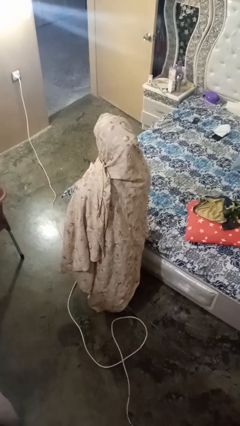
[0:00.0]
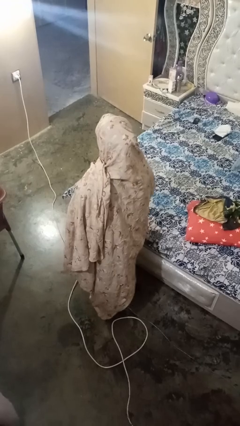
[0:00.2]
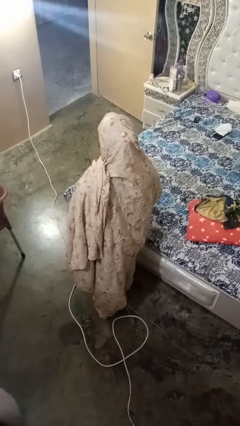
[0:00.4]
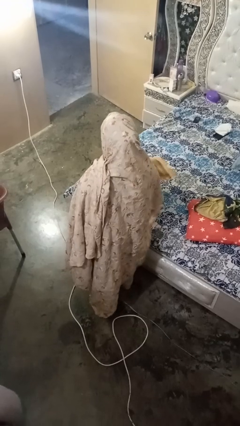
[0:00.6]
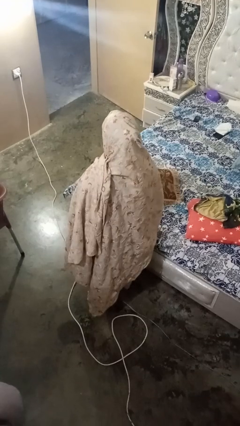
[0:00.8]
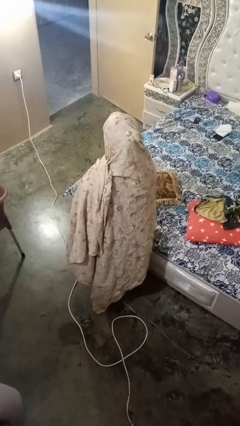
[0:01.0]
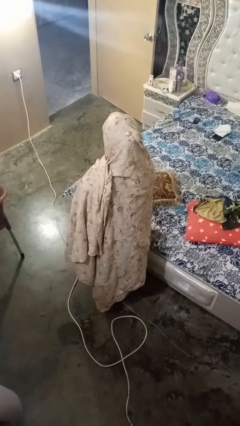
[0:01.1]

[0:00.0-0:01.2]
person puts down object on bed

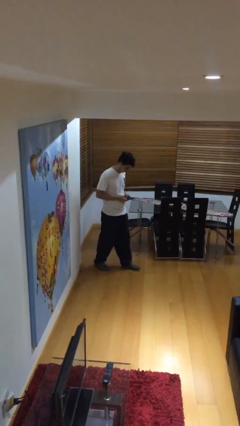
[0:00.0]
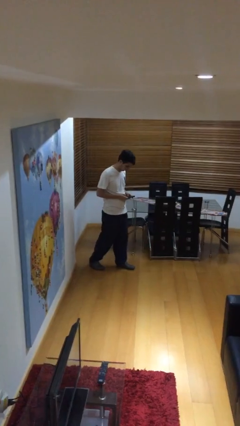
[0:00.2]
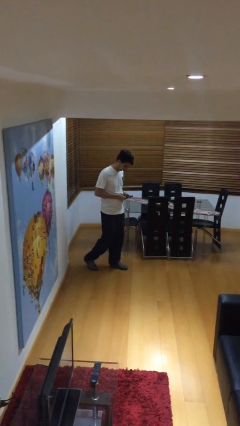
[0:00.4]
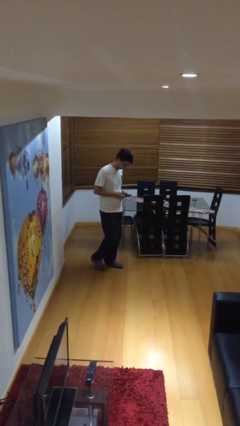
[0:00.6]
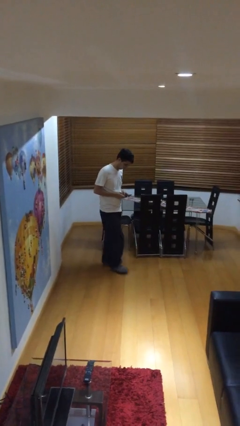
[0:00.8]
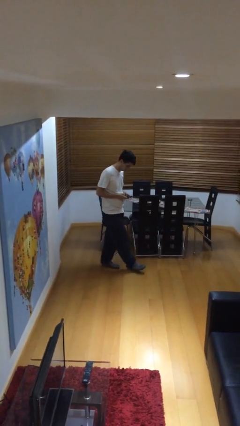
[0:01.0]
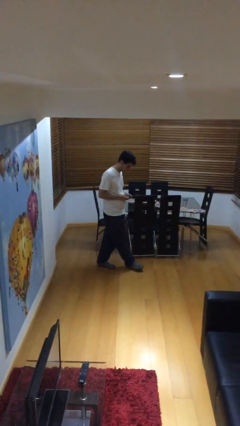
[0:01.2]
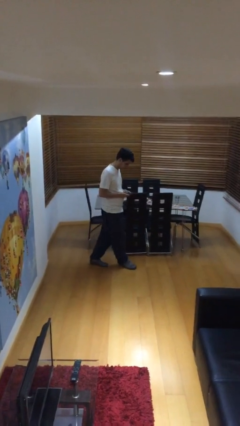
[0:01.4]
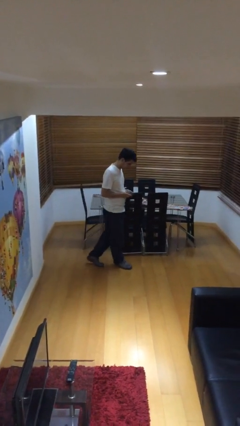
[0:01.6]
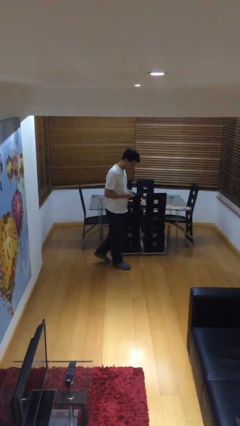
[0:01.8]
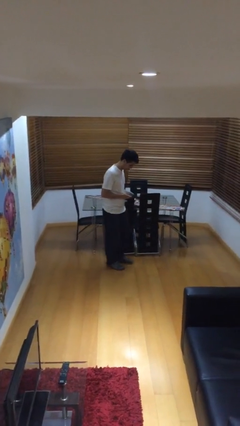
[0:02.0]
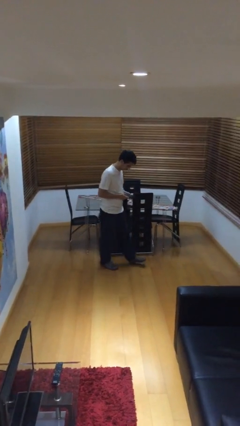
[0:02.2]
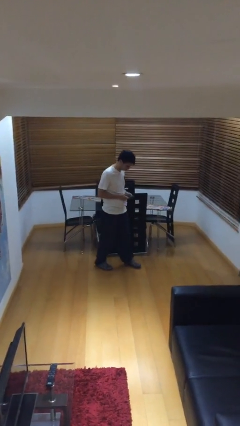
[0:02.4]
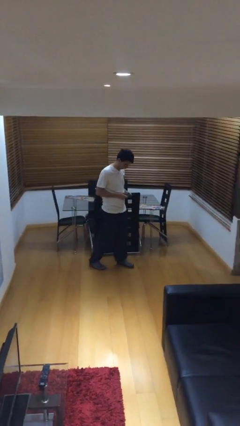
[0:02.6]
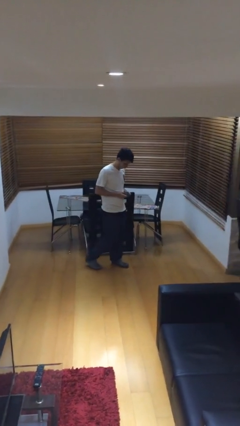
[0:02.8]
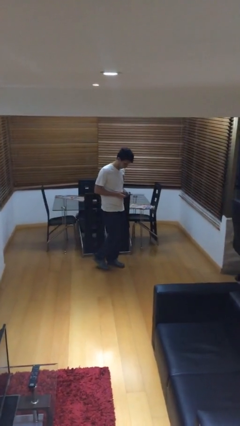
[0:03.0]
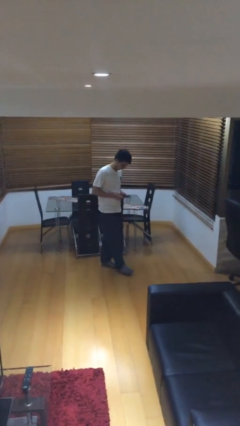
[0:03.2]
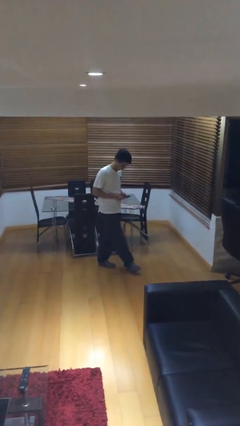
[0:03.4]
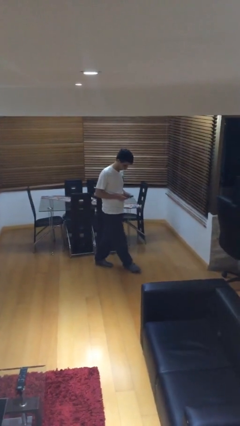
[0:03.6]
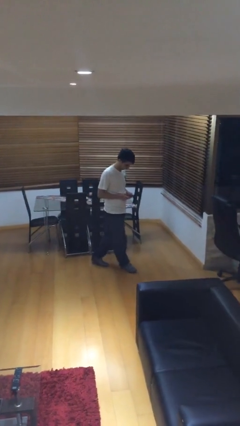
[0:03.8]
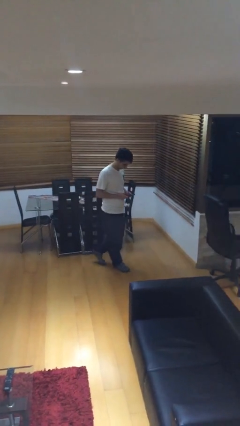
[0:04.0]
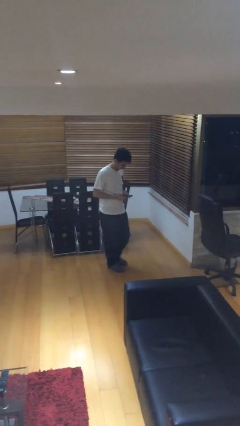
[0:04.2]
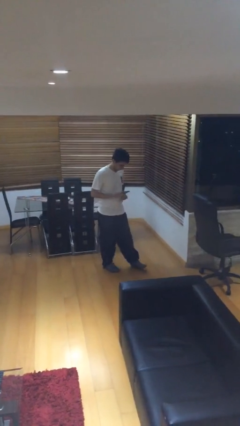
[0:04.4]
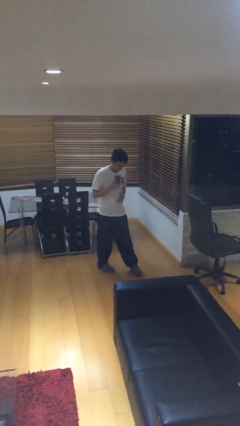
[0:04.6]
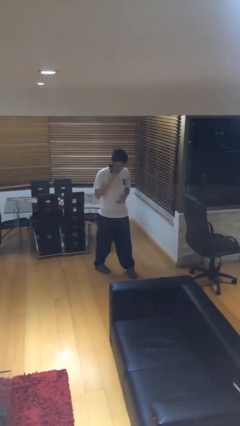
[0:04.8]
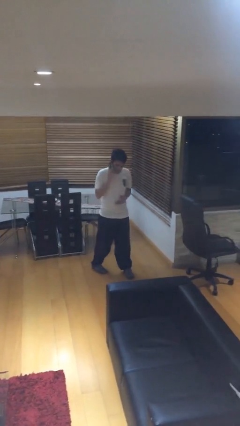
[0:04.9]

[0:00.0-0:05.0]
person texts on phone
